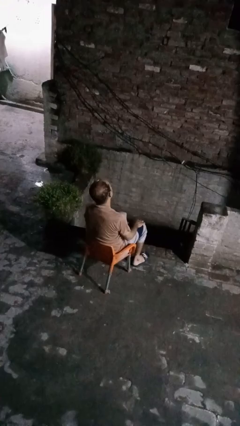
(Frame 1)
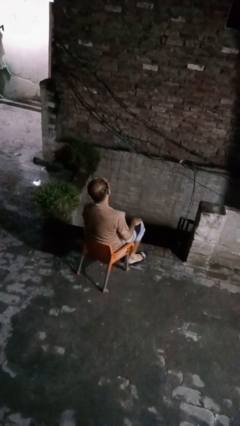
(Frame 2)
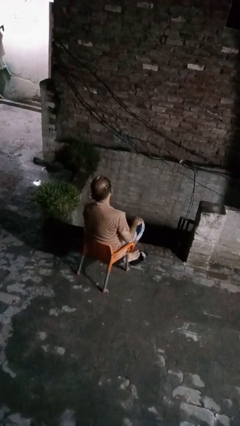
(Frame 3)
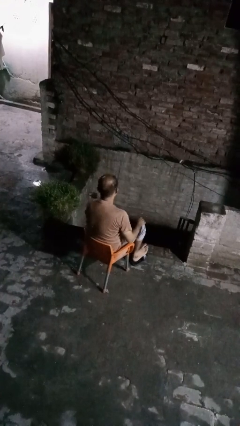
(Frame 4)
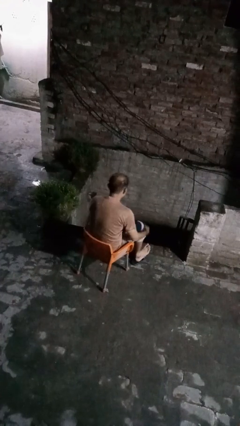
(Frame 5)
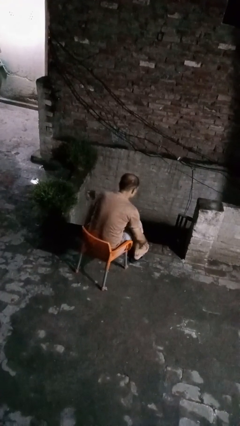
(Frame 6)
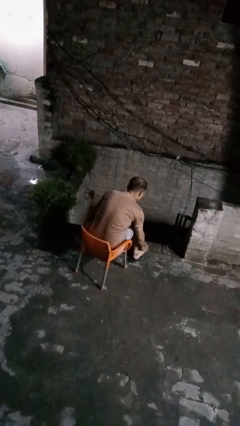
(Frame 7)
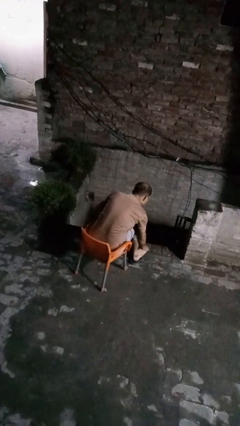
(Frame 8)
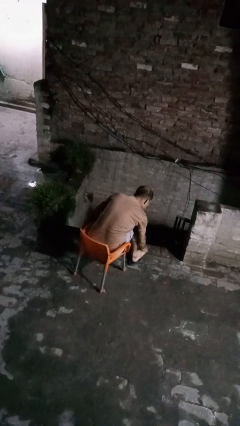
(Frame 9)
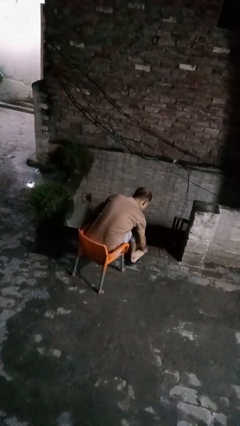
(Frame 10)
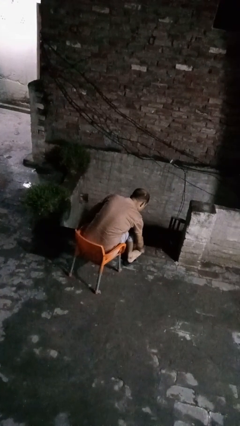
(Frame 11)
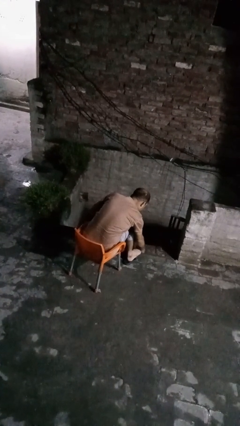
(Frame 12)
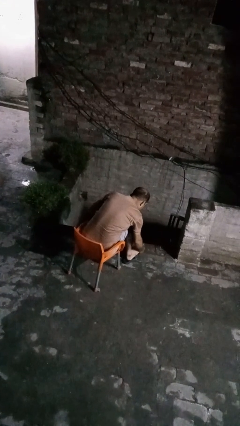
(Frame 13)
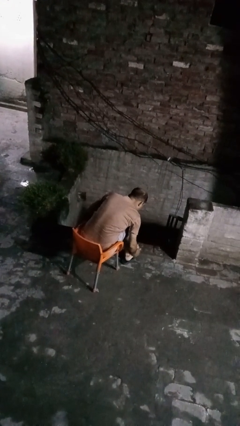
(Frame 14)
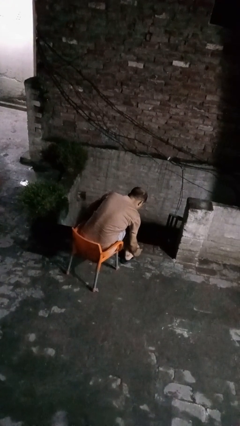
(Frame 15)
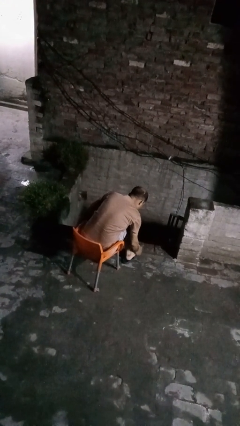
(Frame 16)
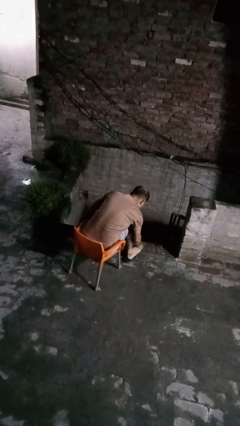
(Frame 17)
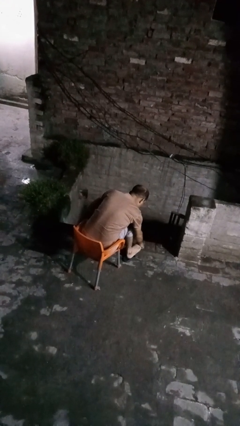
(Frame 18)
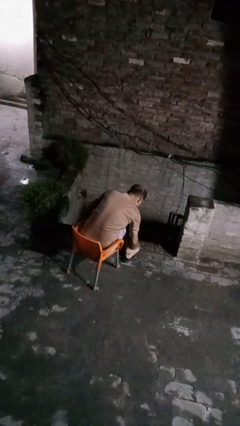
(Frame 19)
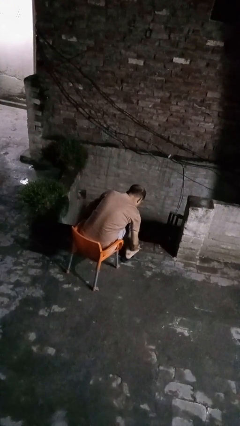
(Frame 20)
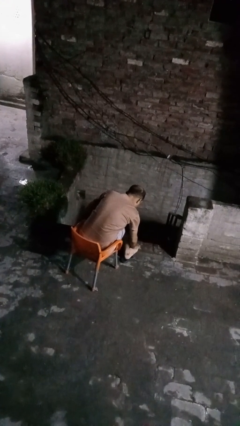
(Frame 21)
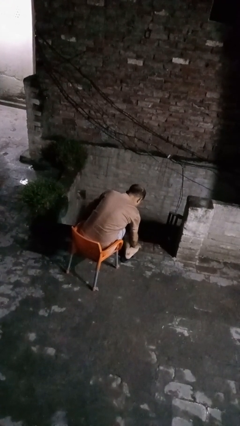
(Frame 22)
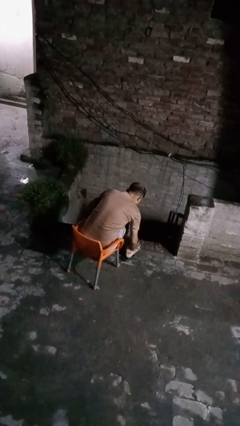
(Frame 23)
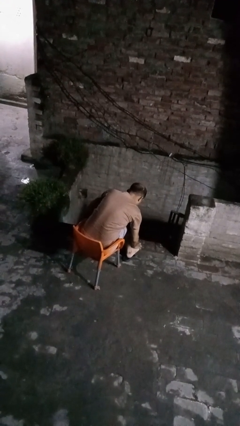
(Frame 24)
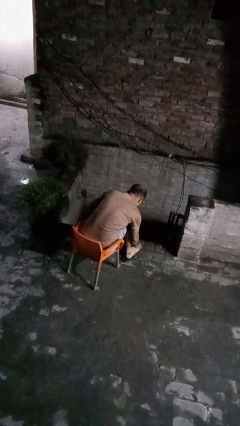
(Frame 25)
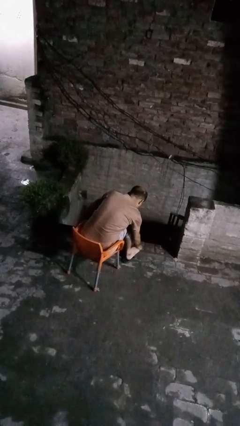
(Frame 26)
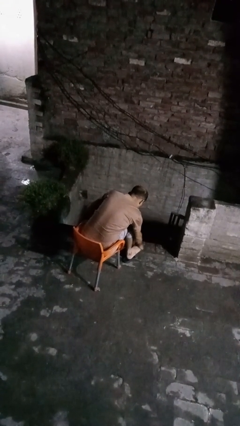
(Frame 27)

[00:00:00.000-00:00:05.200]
person rubs foot

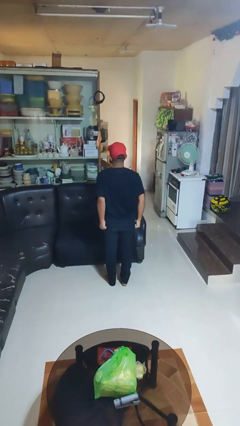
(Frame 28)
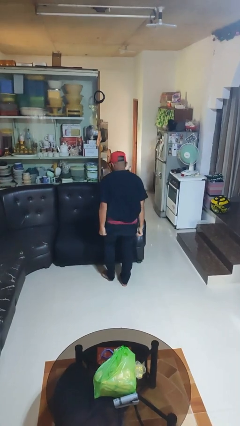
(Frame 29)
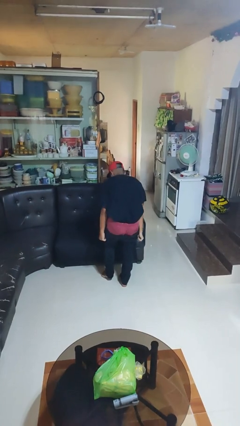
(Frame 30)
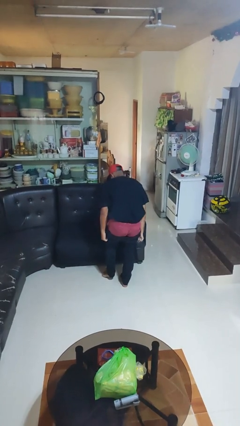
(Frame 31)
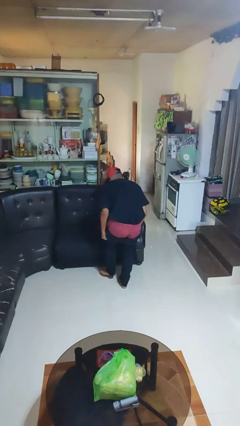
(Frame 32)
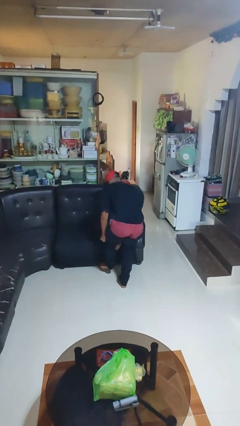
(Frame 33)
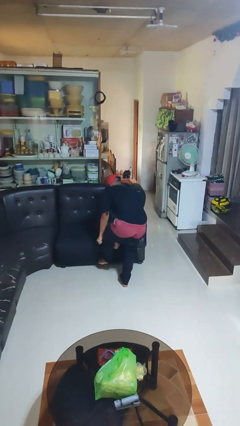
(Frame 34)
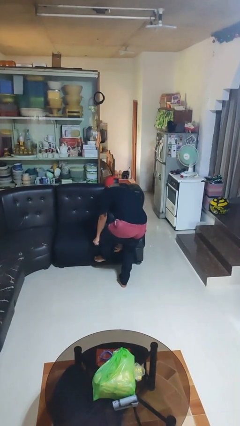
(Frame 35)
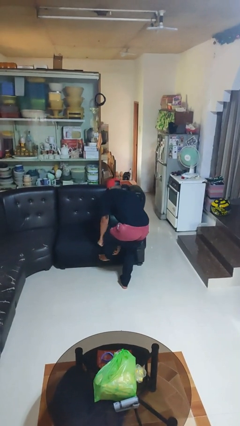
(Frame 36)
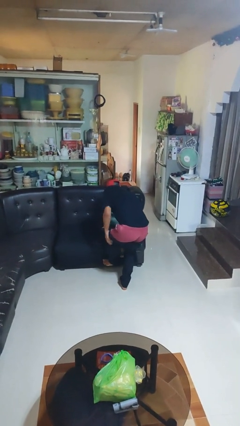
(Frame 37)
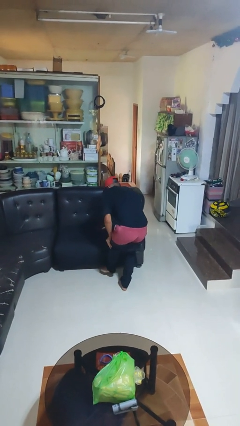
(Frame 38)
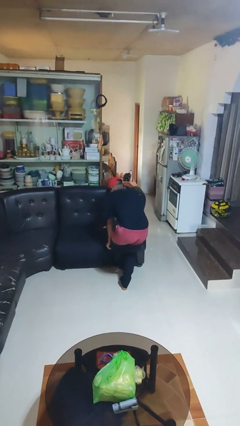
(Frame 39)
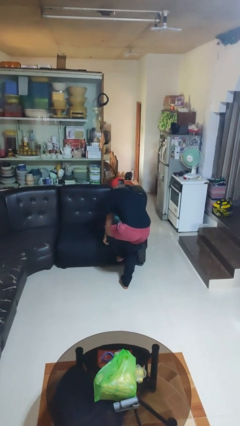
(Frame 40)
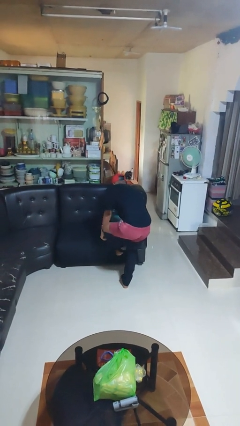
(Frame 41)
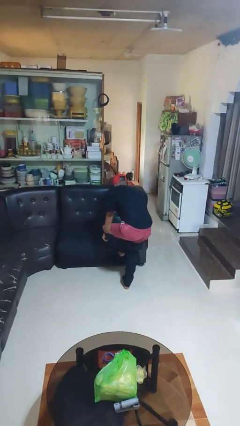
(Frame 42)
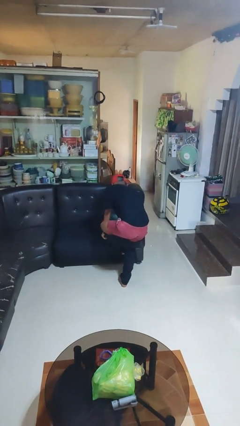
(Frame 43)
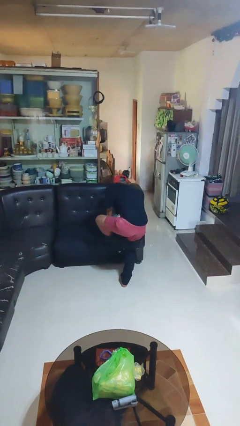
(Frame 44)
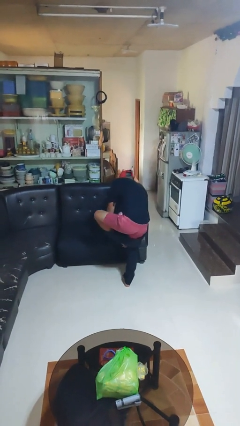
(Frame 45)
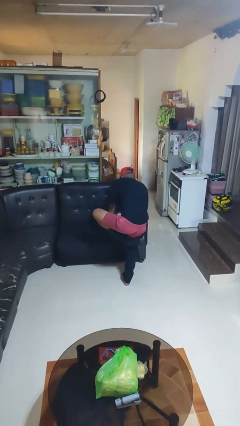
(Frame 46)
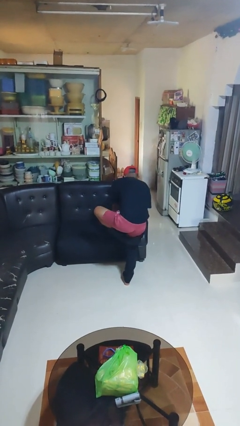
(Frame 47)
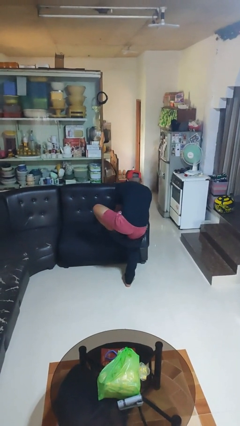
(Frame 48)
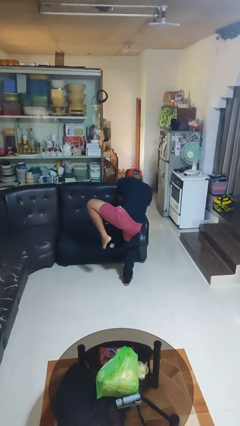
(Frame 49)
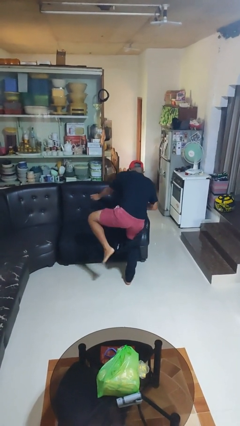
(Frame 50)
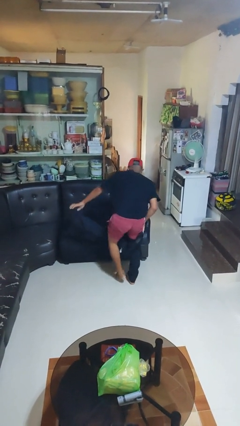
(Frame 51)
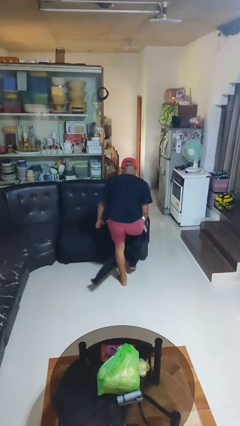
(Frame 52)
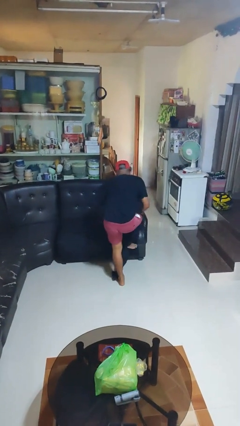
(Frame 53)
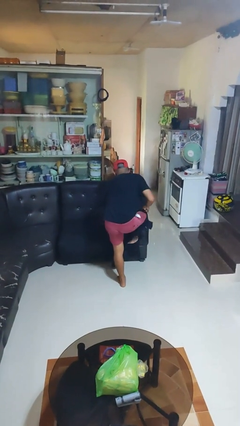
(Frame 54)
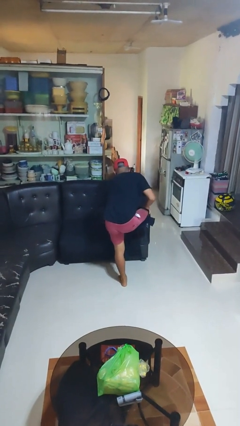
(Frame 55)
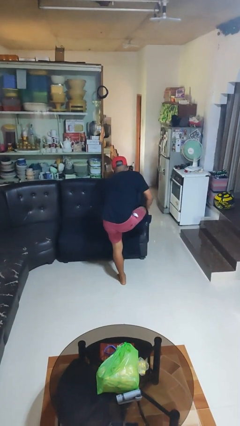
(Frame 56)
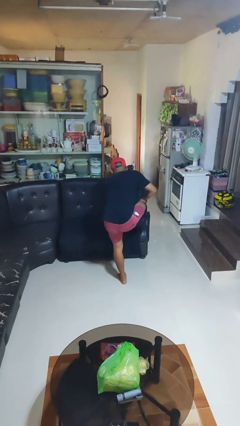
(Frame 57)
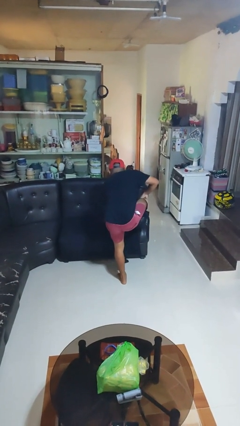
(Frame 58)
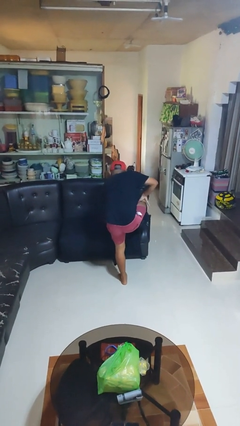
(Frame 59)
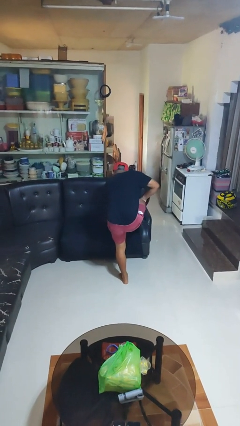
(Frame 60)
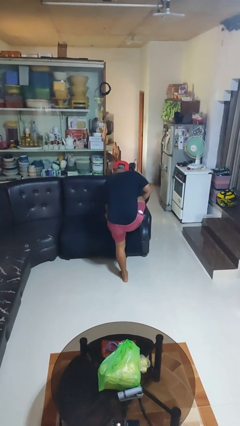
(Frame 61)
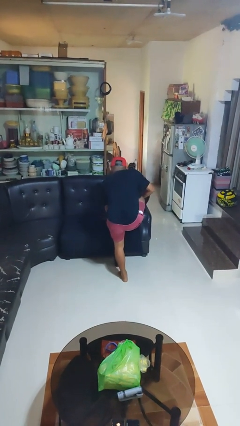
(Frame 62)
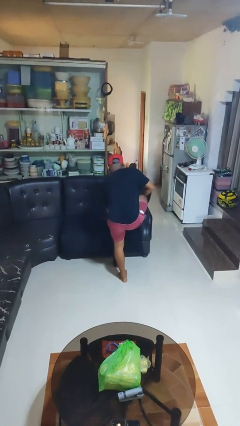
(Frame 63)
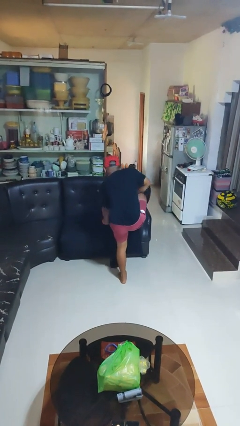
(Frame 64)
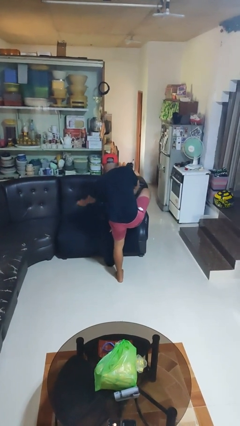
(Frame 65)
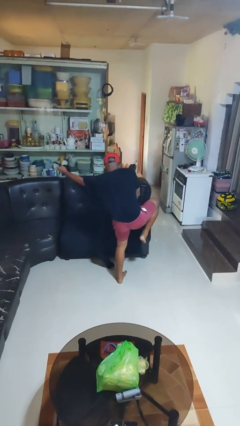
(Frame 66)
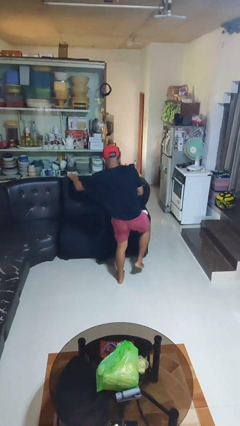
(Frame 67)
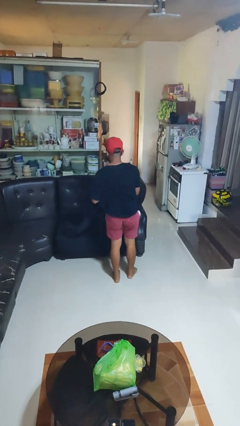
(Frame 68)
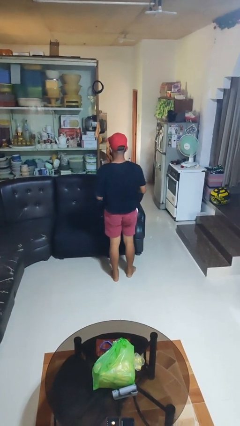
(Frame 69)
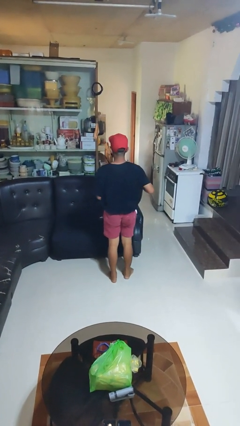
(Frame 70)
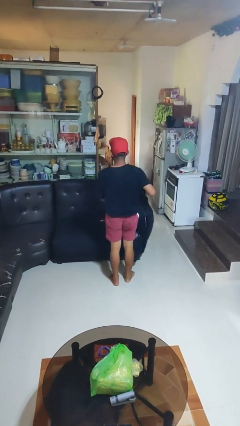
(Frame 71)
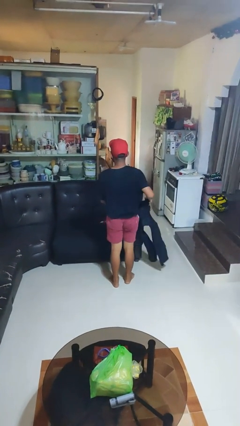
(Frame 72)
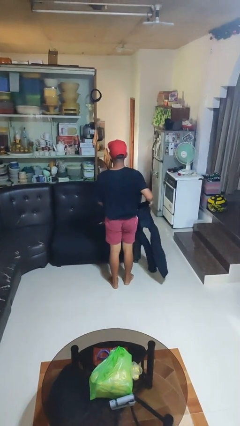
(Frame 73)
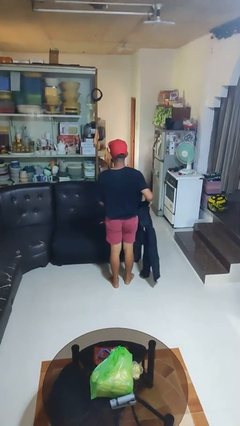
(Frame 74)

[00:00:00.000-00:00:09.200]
person takes off pants

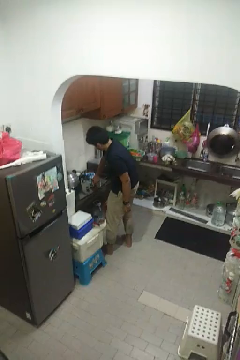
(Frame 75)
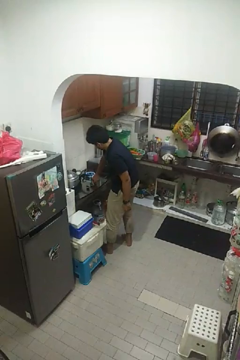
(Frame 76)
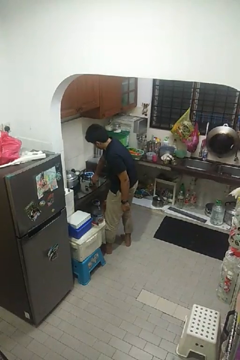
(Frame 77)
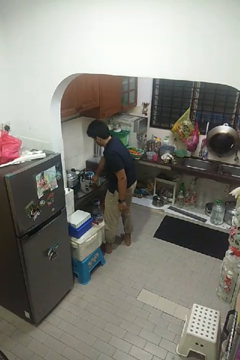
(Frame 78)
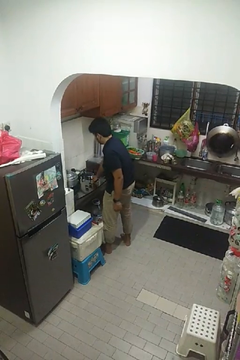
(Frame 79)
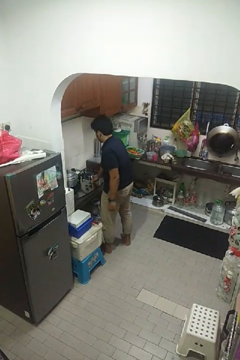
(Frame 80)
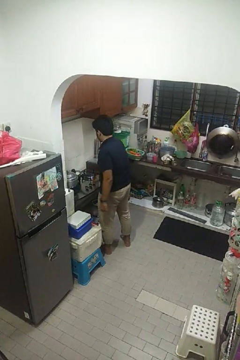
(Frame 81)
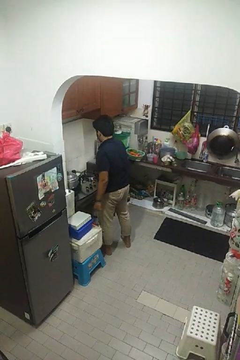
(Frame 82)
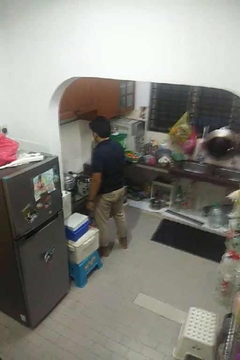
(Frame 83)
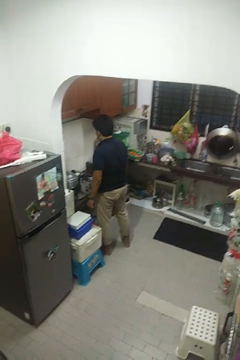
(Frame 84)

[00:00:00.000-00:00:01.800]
person turns off stovetop

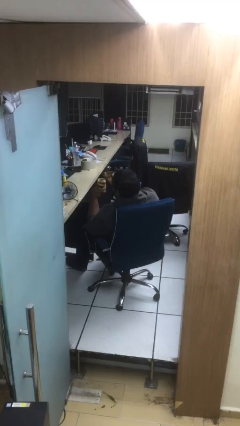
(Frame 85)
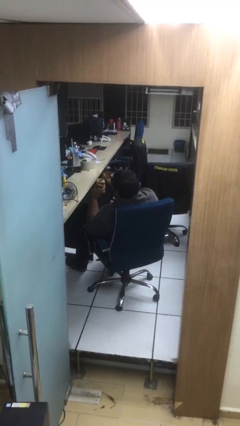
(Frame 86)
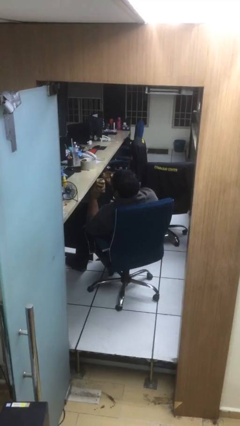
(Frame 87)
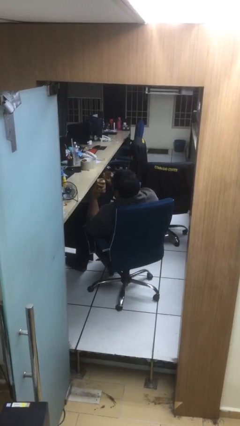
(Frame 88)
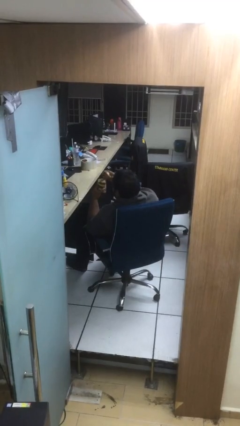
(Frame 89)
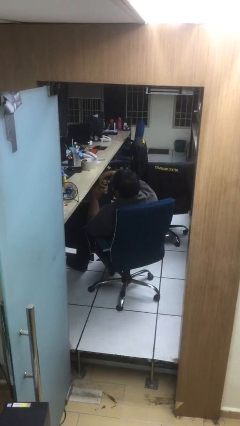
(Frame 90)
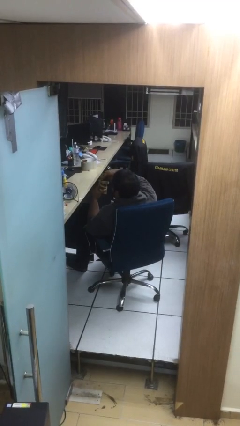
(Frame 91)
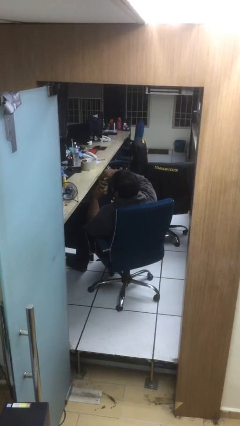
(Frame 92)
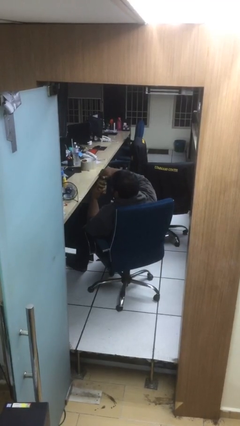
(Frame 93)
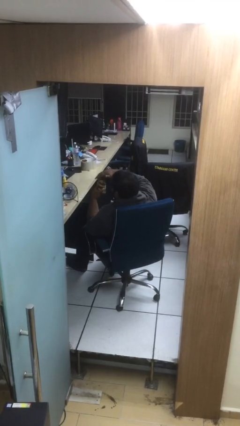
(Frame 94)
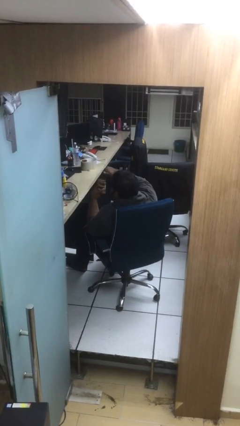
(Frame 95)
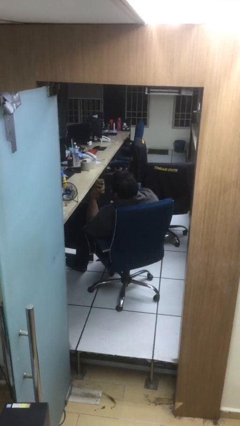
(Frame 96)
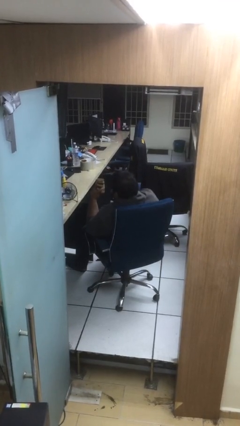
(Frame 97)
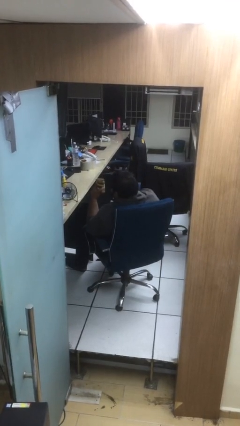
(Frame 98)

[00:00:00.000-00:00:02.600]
person closes jar
